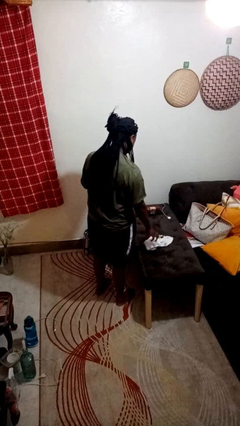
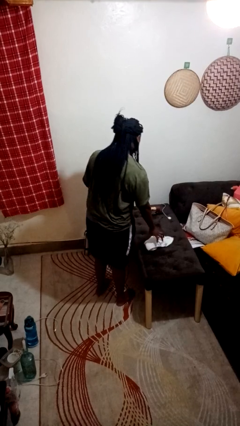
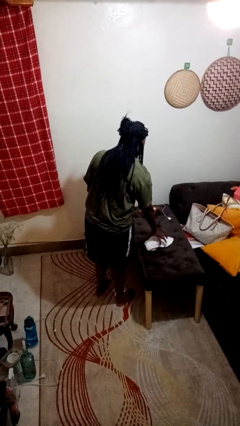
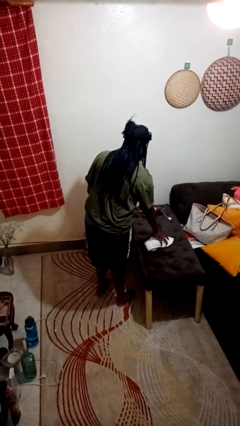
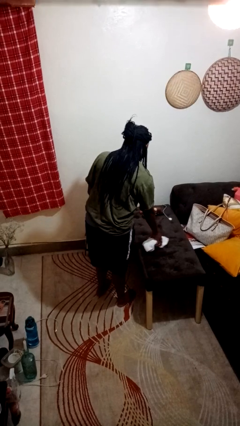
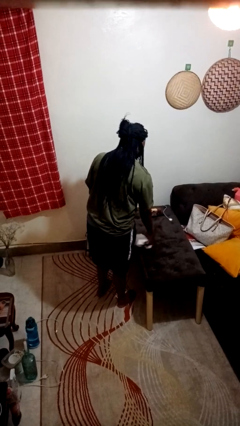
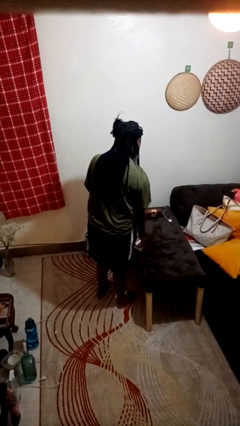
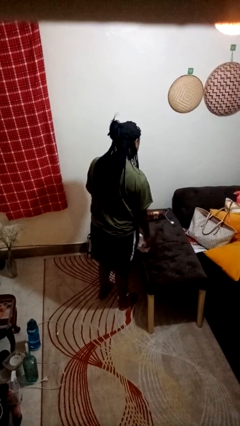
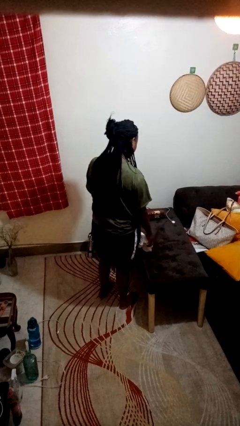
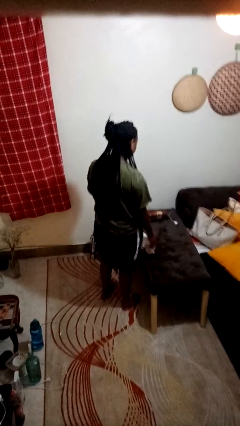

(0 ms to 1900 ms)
person picks up object from table

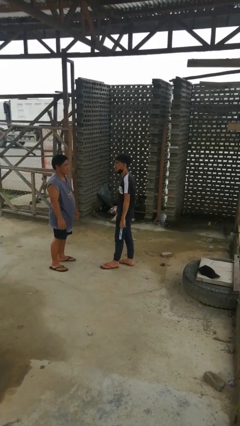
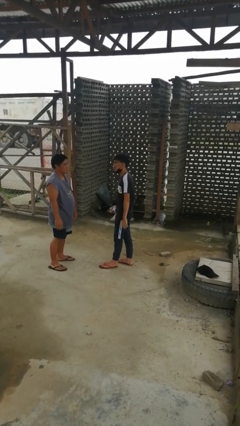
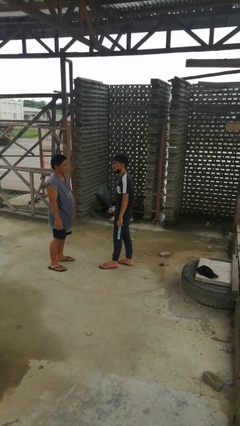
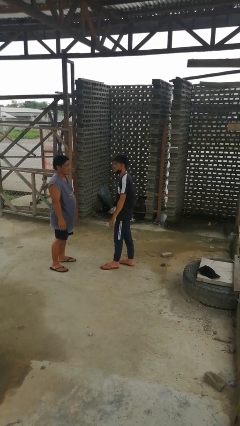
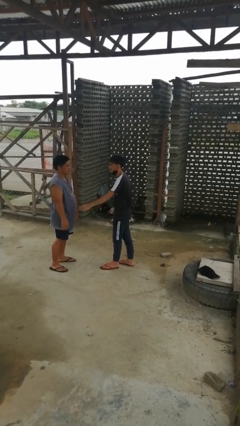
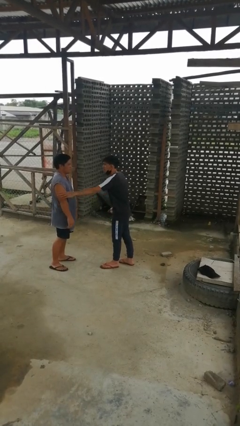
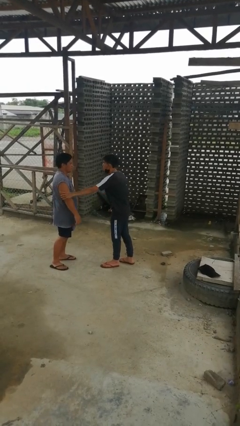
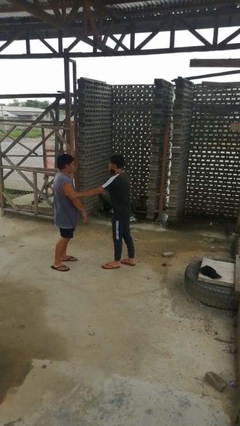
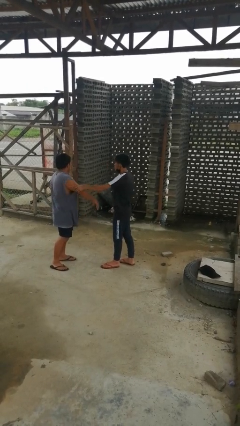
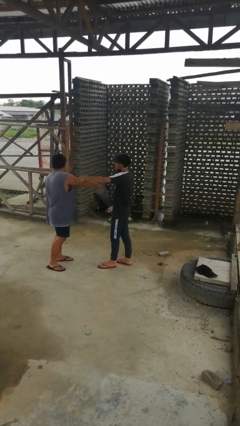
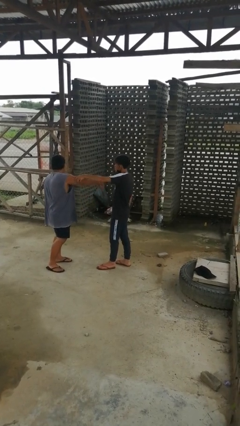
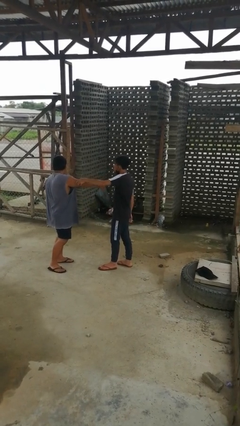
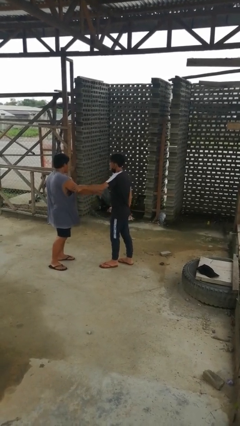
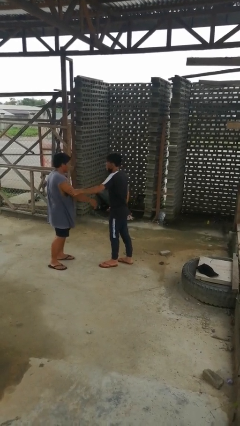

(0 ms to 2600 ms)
person grabs person by bicep

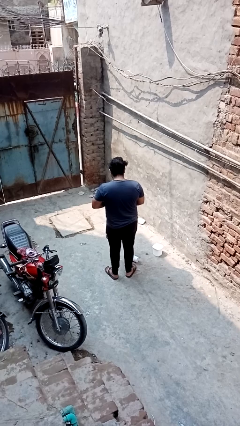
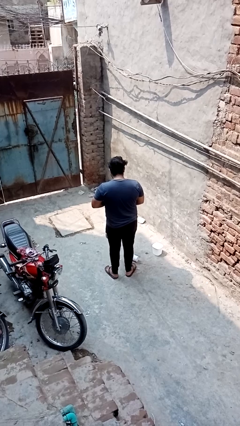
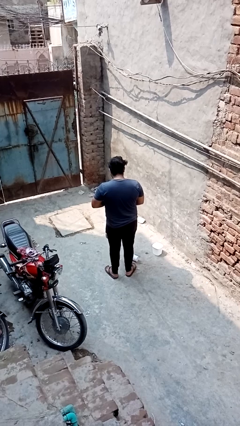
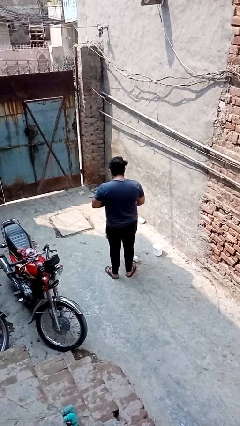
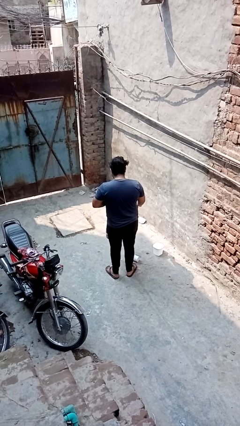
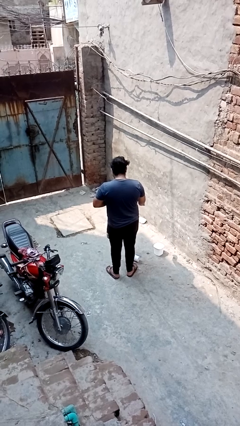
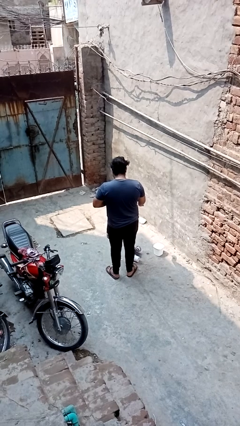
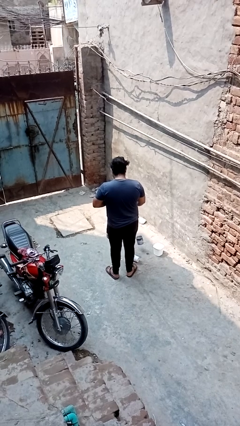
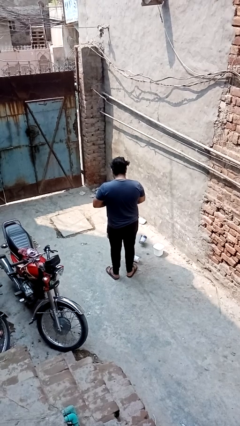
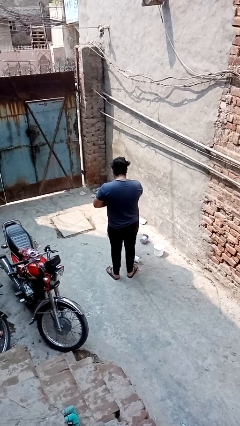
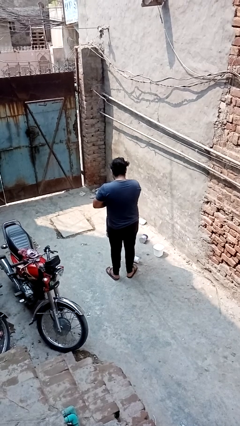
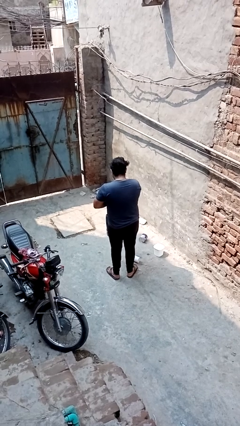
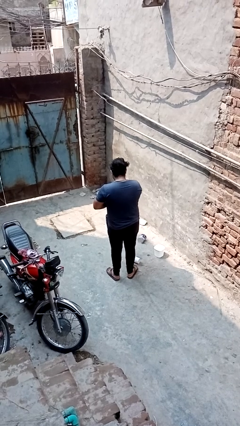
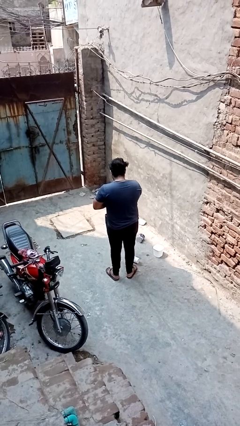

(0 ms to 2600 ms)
person cleans table with rag

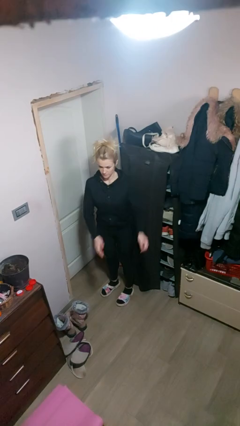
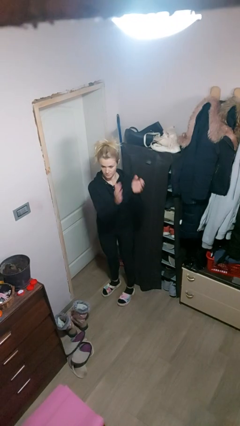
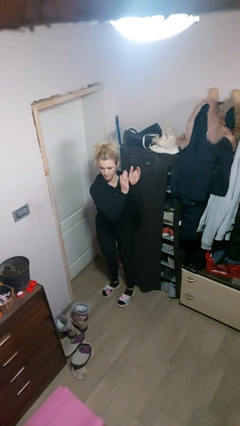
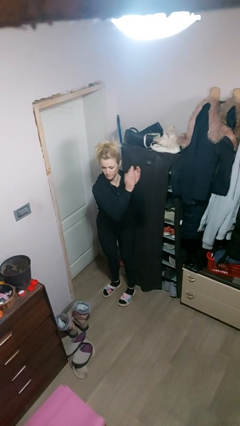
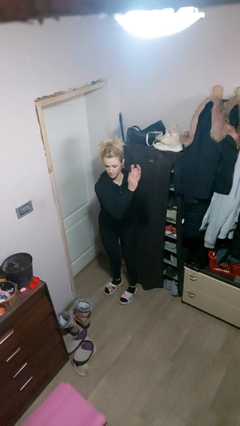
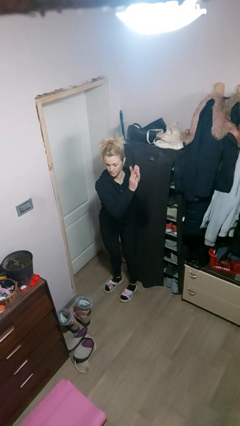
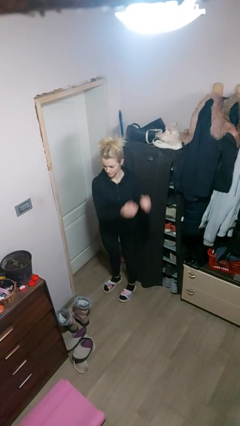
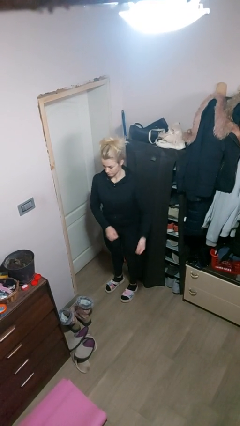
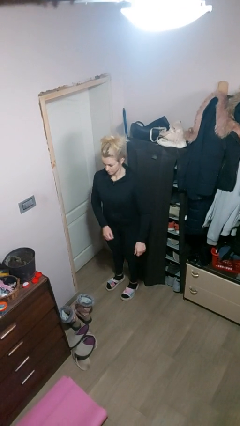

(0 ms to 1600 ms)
person claps hands

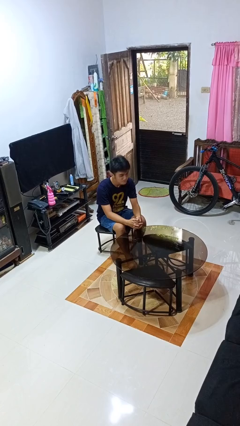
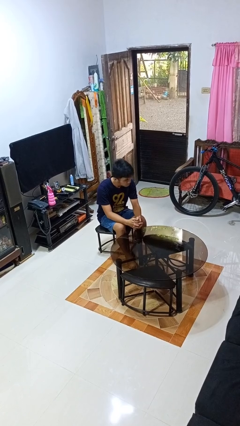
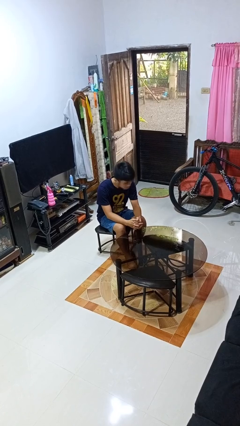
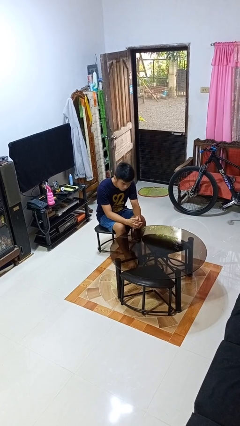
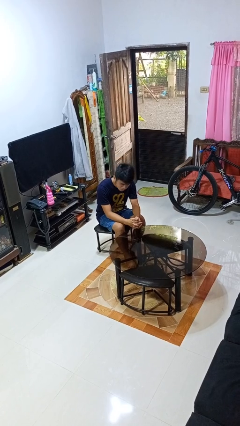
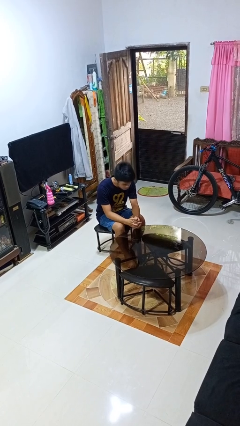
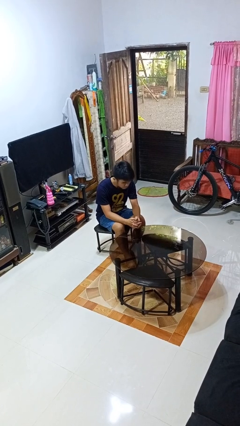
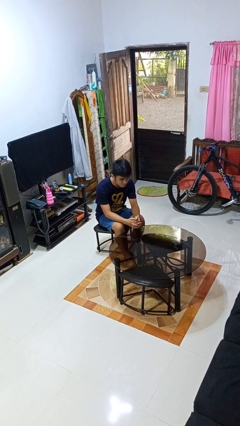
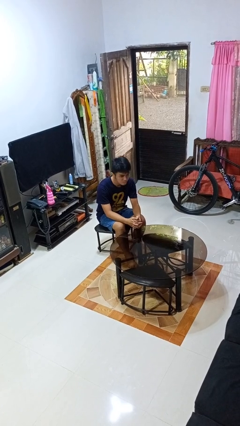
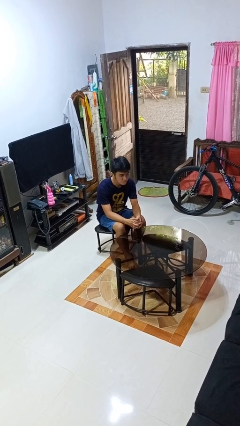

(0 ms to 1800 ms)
person shakes head

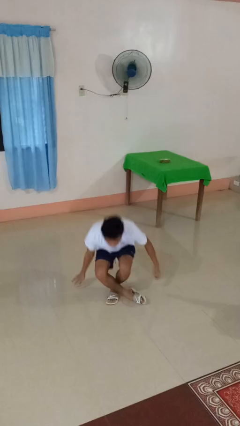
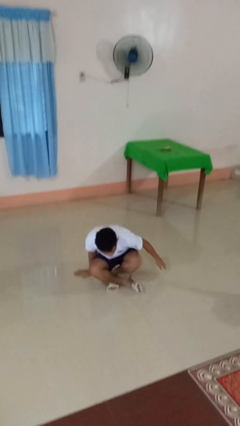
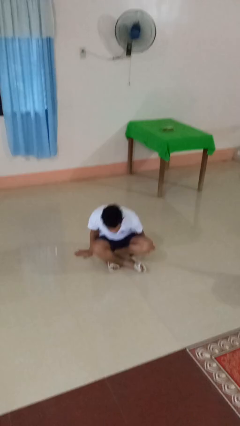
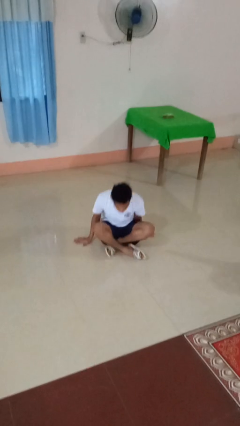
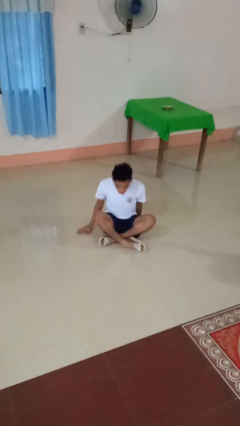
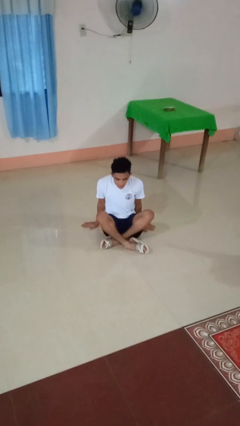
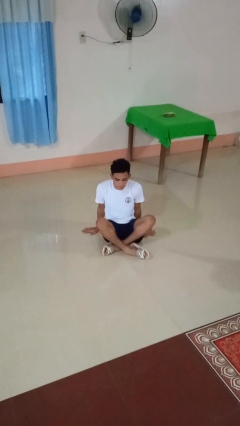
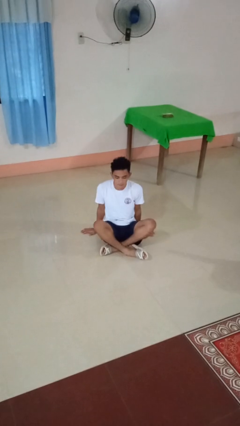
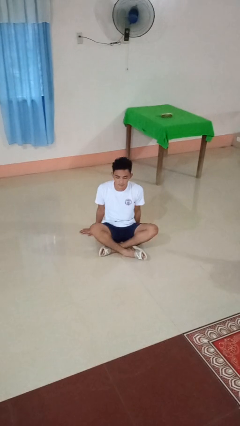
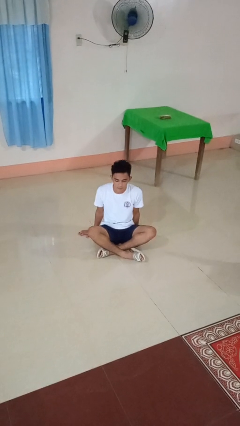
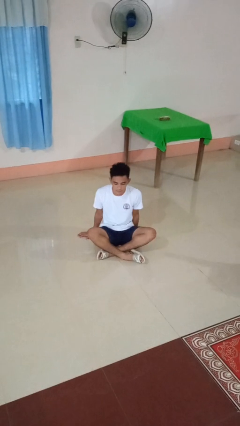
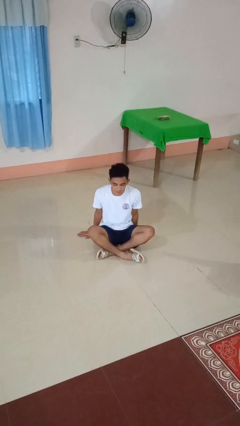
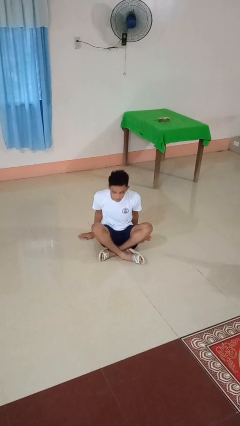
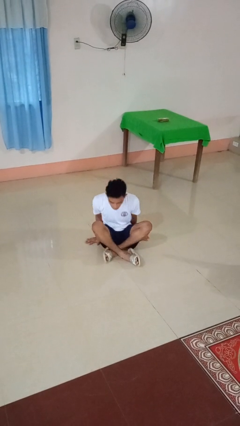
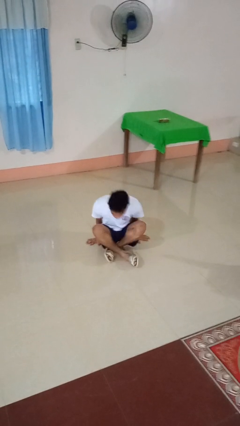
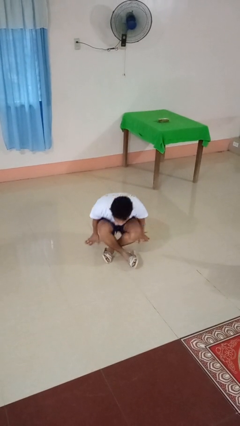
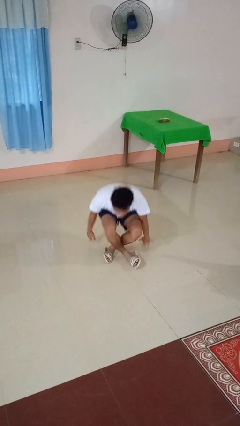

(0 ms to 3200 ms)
person sits crisscross

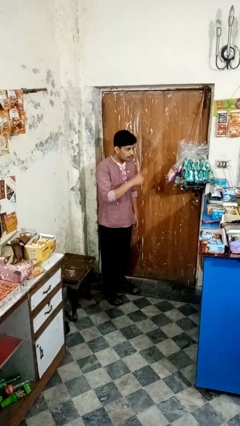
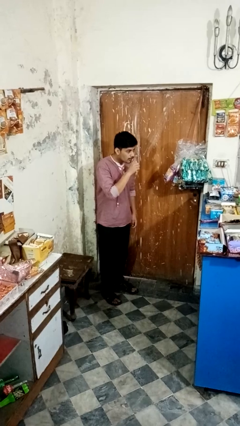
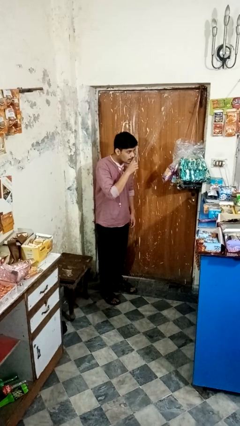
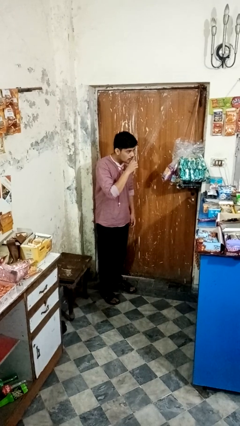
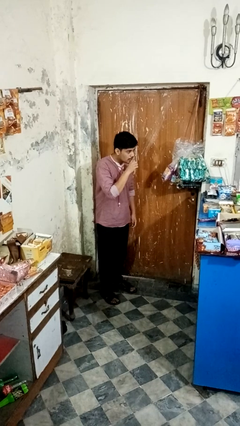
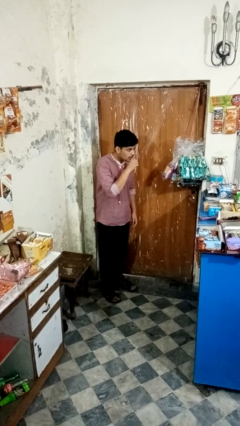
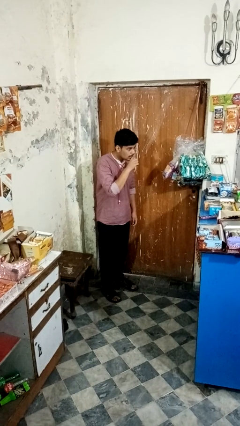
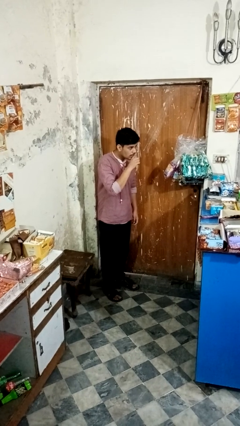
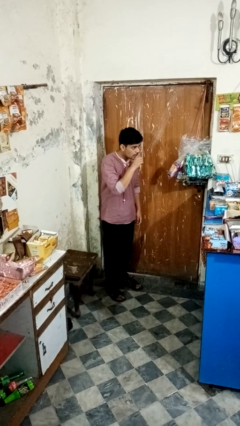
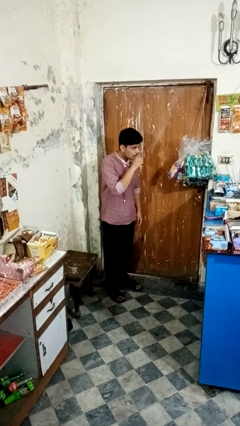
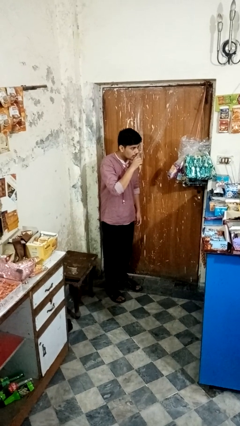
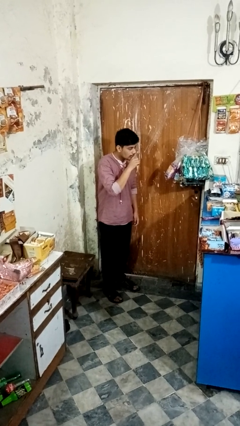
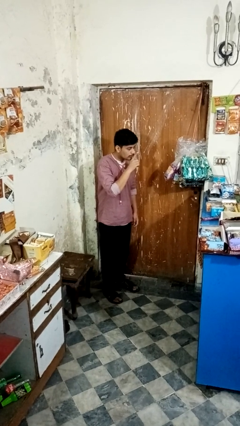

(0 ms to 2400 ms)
person gestures be quiet

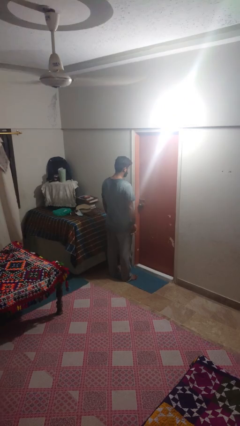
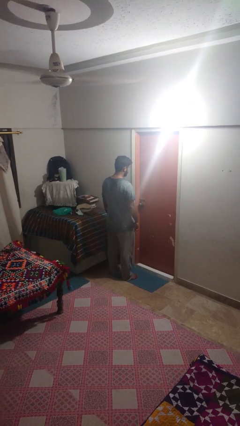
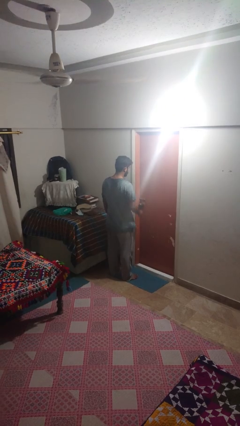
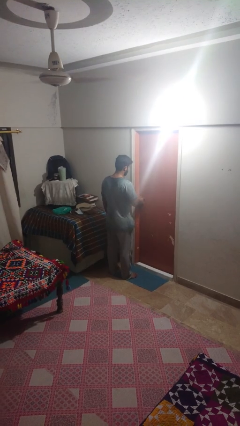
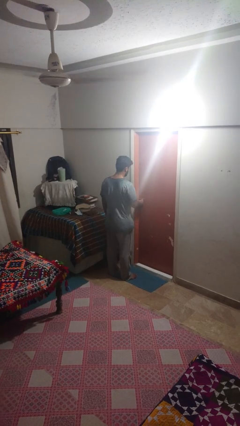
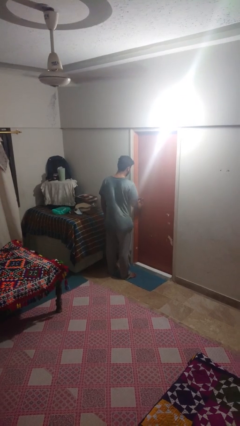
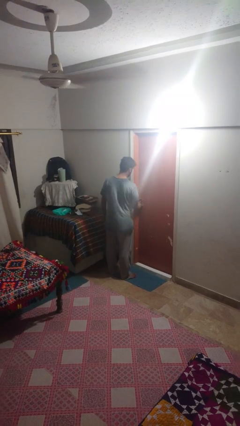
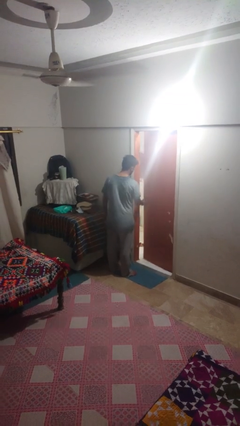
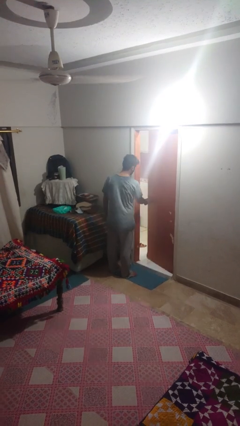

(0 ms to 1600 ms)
person opens facility door
